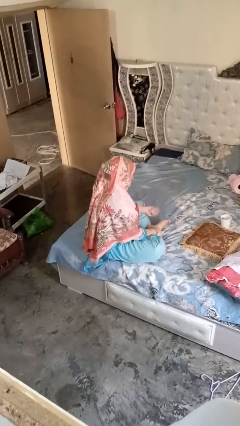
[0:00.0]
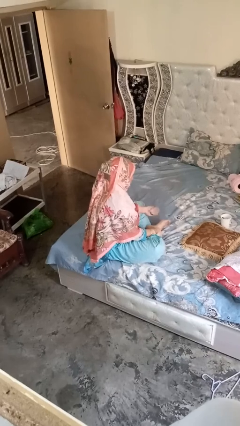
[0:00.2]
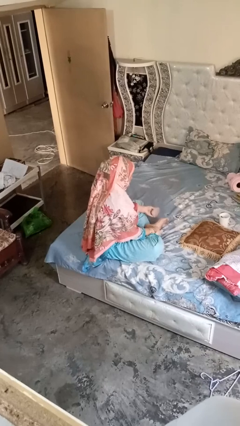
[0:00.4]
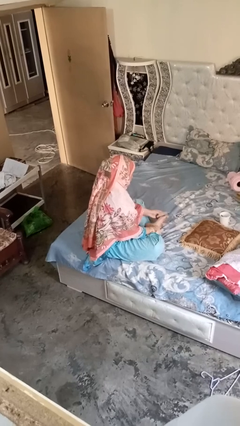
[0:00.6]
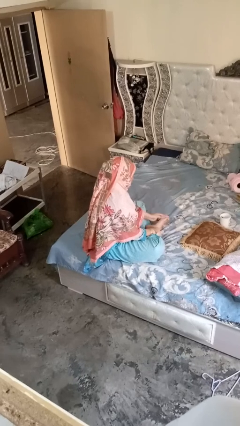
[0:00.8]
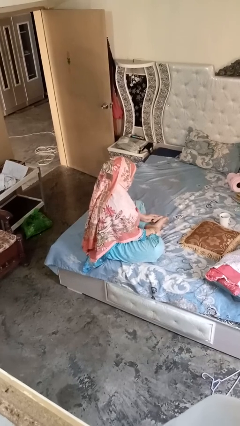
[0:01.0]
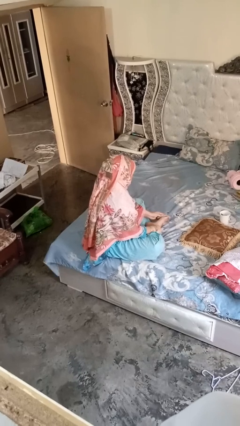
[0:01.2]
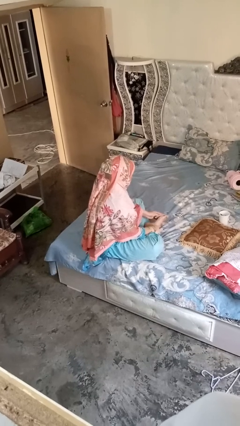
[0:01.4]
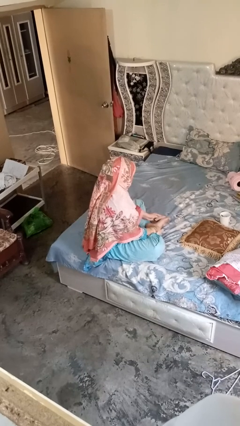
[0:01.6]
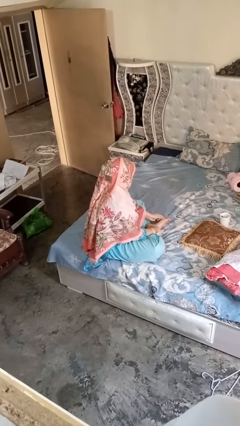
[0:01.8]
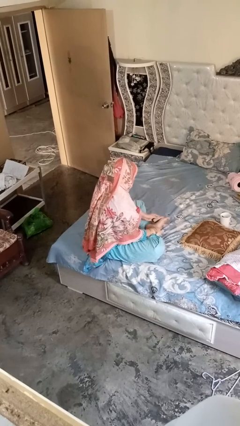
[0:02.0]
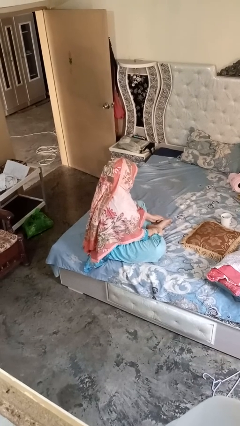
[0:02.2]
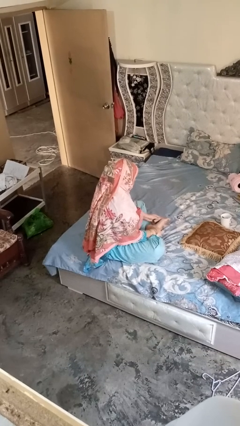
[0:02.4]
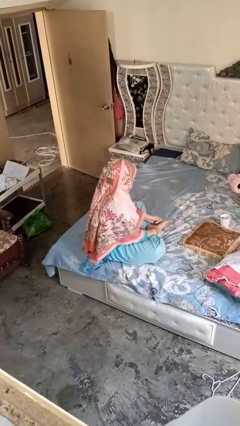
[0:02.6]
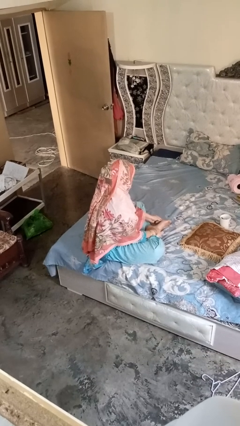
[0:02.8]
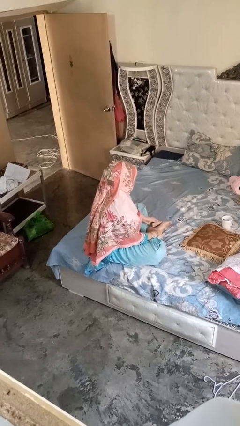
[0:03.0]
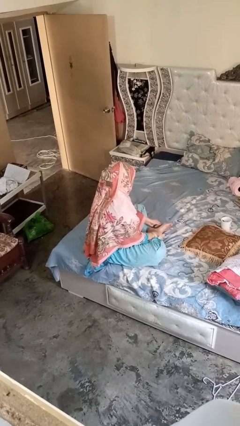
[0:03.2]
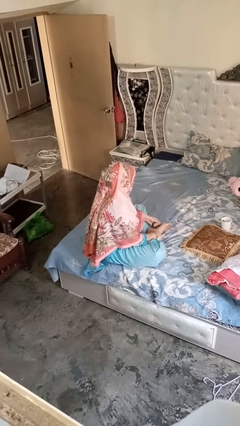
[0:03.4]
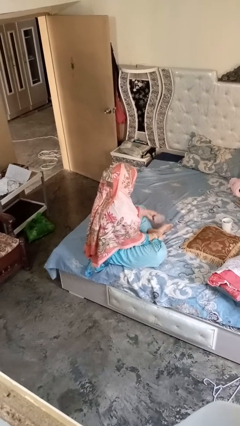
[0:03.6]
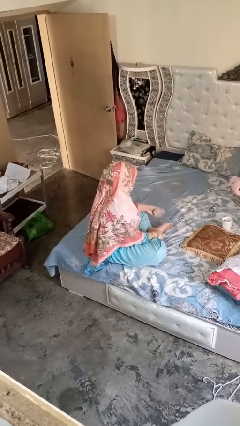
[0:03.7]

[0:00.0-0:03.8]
person rubs foot

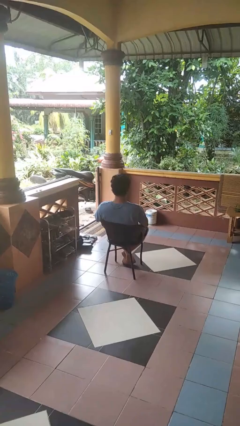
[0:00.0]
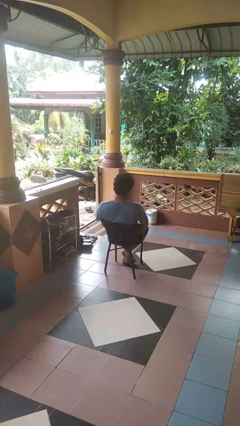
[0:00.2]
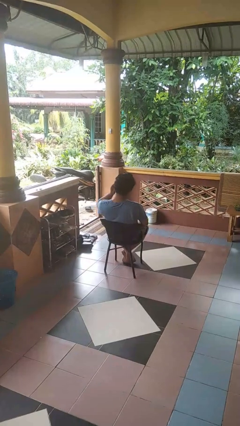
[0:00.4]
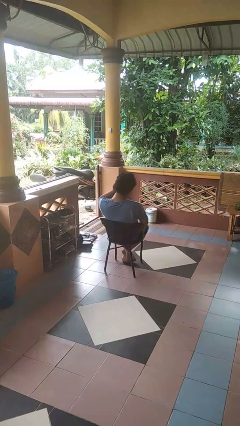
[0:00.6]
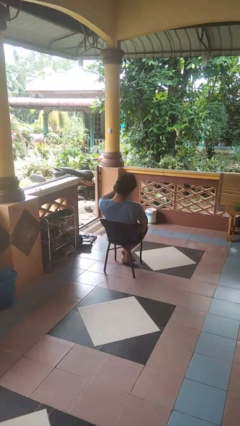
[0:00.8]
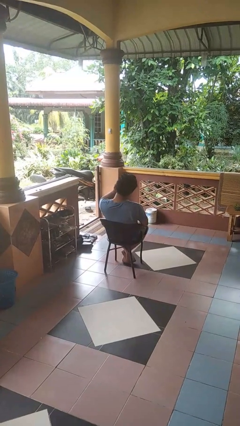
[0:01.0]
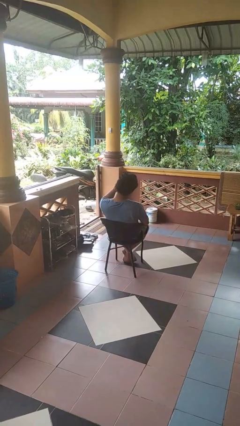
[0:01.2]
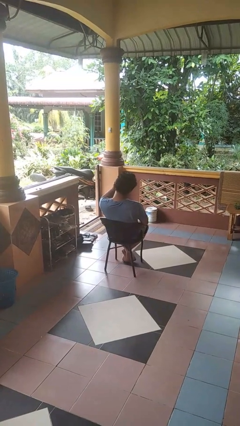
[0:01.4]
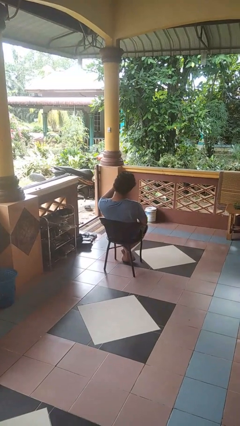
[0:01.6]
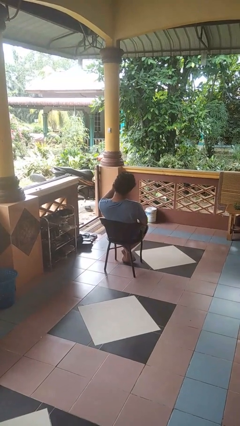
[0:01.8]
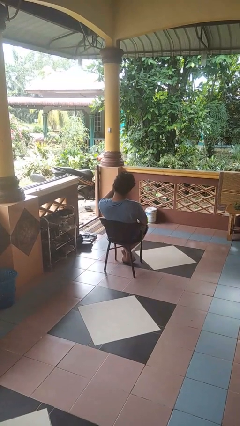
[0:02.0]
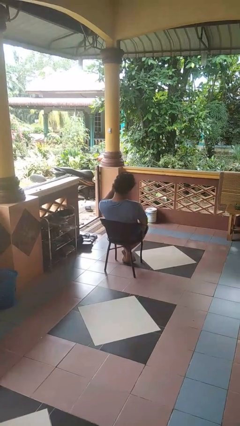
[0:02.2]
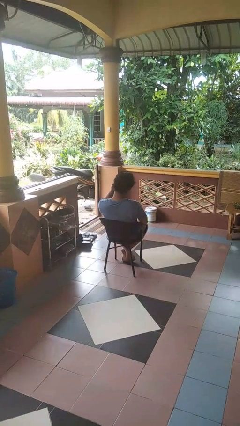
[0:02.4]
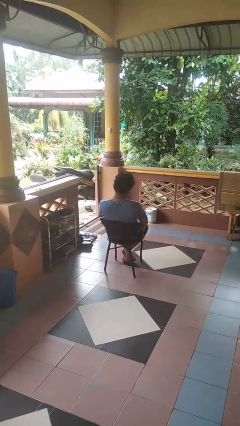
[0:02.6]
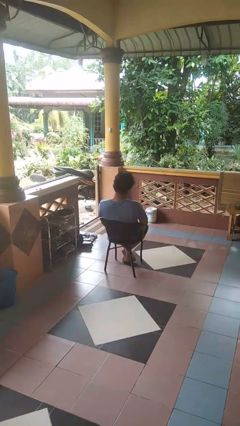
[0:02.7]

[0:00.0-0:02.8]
person touches earlobe

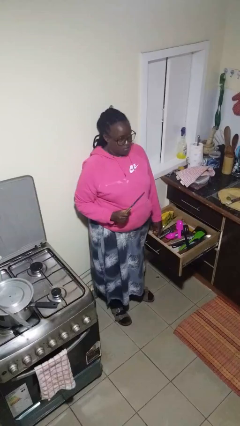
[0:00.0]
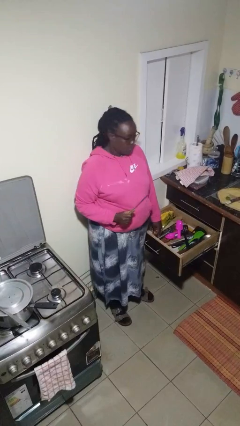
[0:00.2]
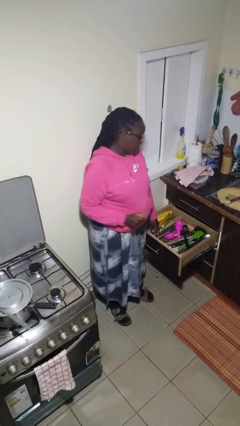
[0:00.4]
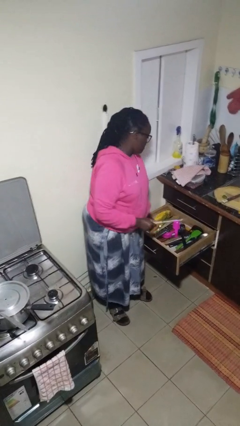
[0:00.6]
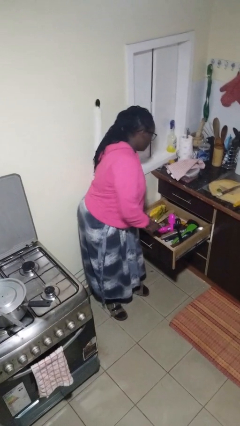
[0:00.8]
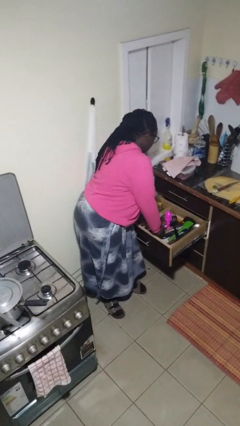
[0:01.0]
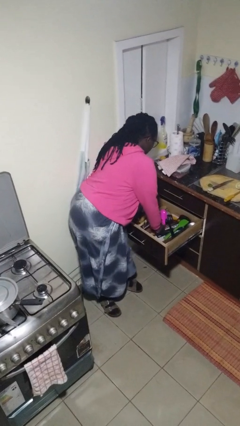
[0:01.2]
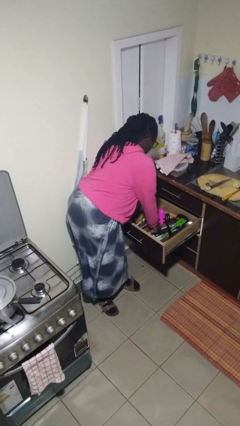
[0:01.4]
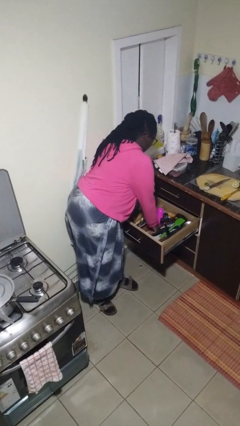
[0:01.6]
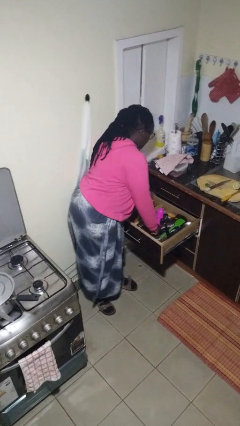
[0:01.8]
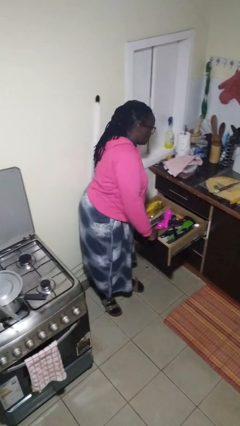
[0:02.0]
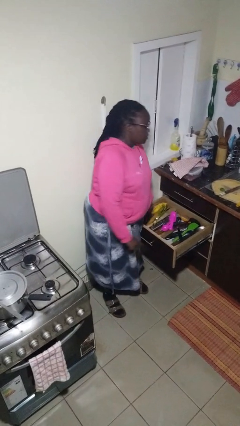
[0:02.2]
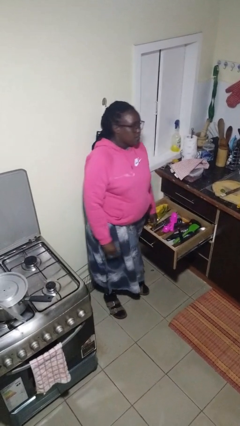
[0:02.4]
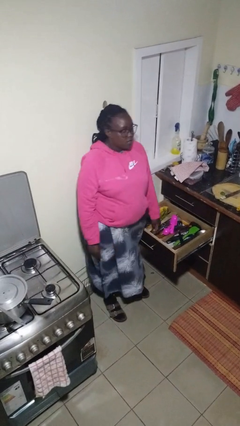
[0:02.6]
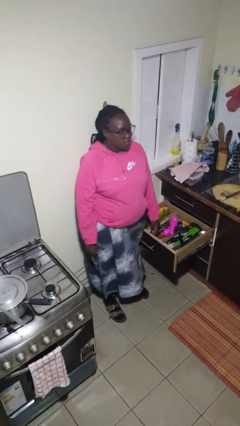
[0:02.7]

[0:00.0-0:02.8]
person puts object into kitchen drawer

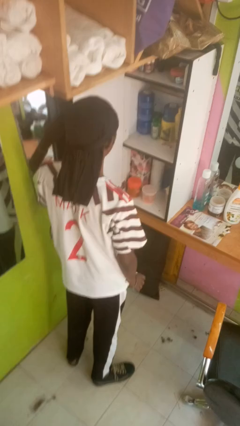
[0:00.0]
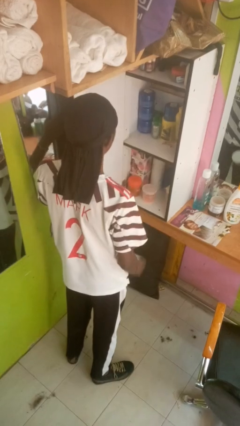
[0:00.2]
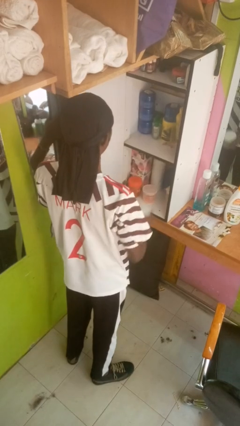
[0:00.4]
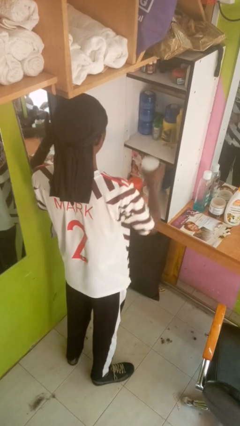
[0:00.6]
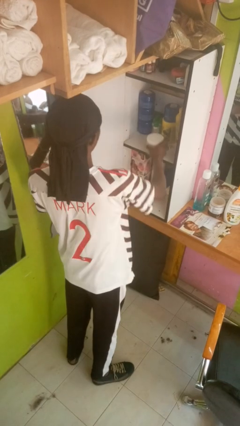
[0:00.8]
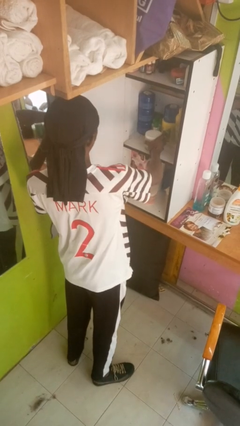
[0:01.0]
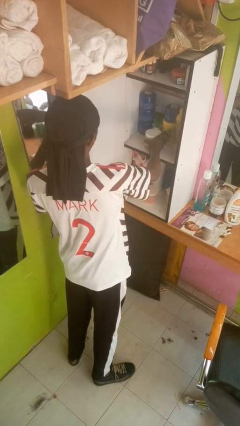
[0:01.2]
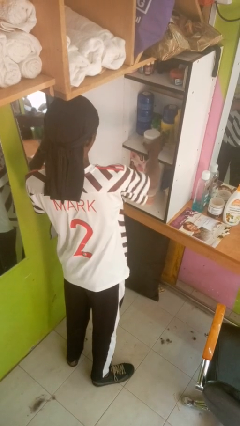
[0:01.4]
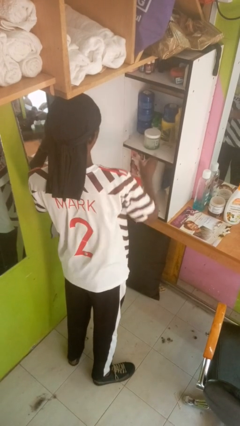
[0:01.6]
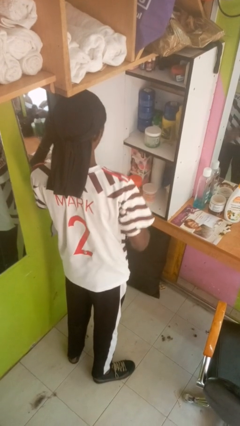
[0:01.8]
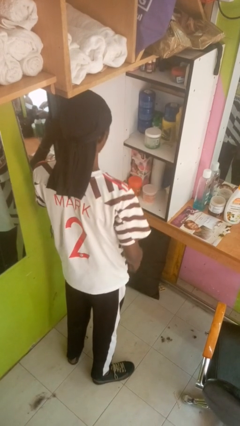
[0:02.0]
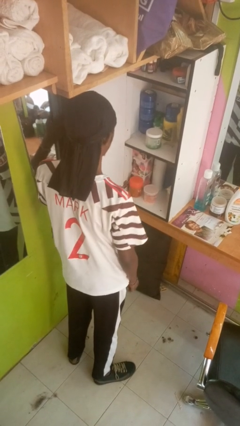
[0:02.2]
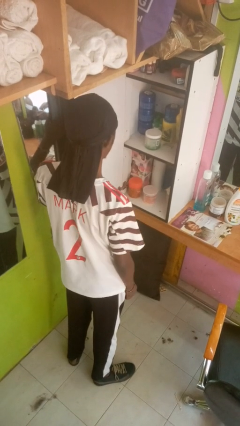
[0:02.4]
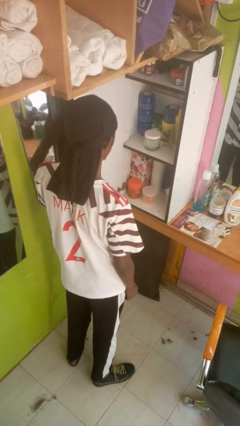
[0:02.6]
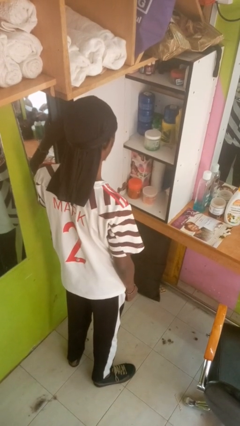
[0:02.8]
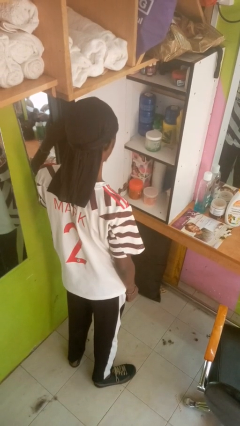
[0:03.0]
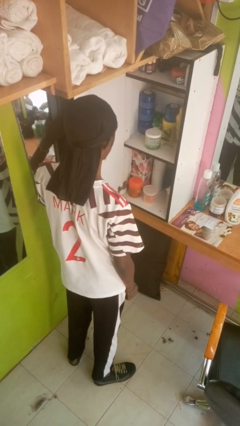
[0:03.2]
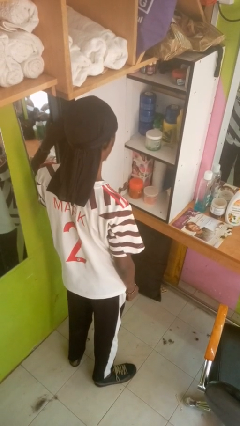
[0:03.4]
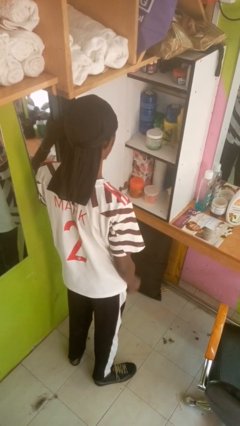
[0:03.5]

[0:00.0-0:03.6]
person puts down object into cabinet

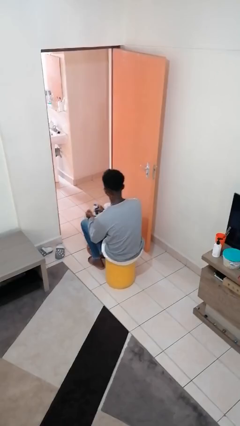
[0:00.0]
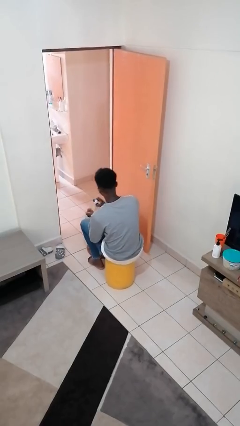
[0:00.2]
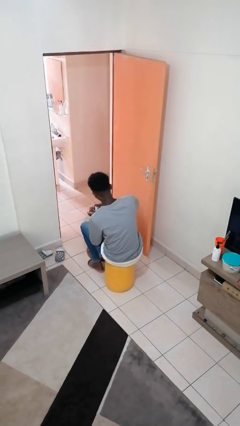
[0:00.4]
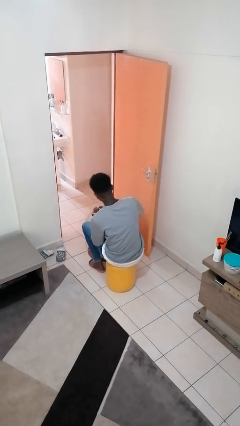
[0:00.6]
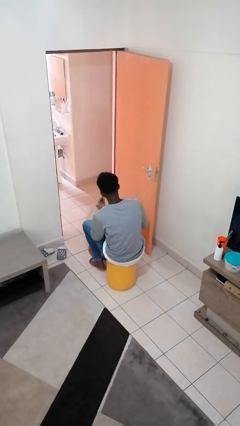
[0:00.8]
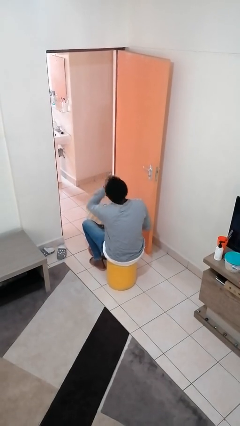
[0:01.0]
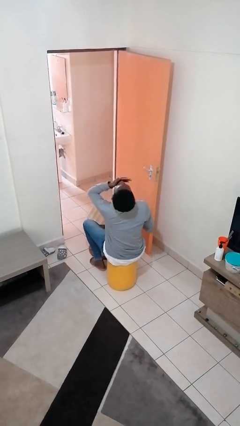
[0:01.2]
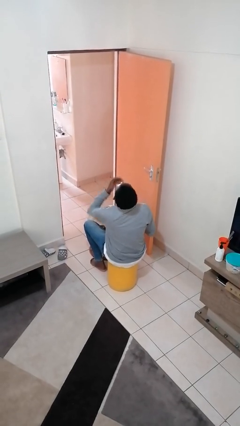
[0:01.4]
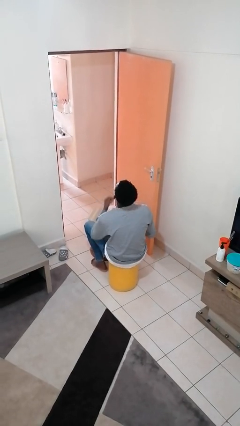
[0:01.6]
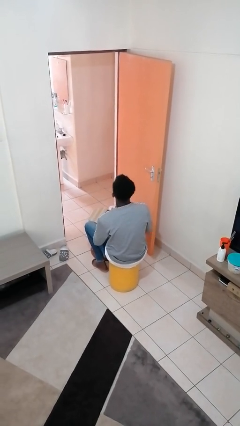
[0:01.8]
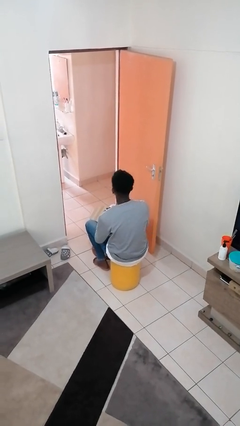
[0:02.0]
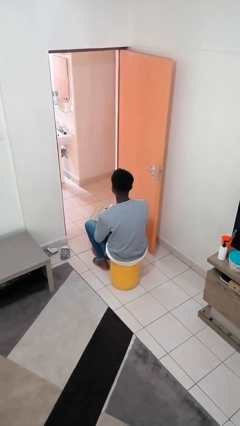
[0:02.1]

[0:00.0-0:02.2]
person takes medicine pills

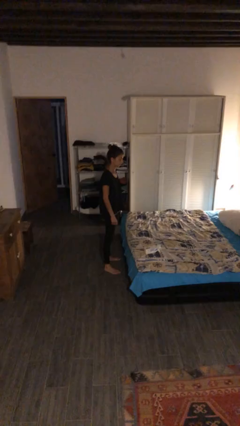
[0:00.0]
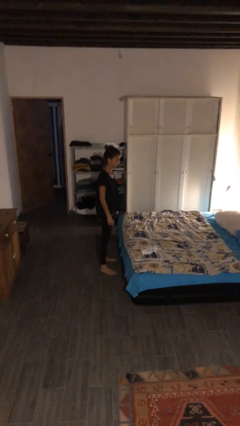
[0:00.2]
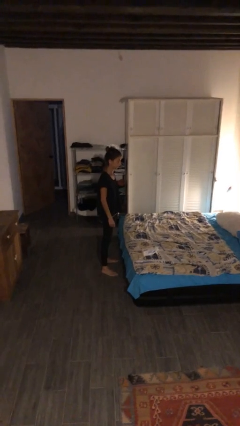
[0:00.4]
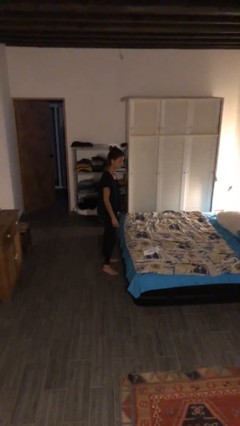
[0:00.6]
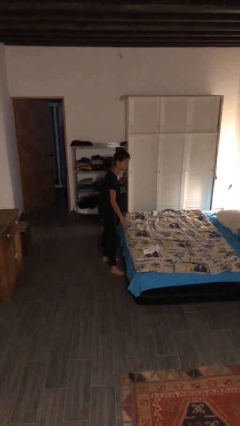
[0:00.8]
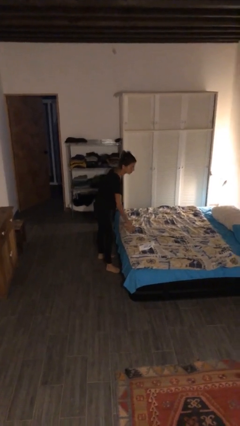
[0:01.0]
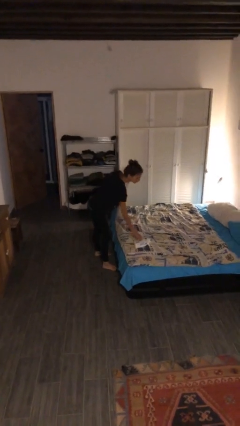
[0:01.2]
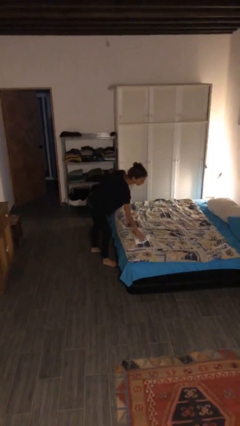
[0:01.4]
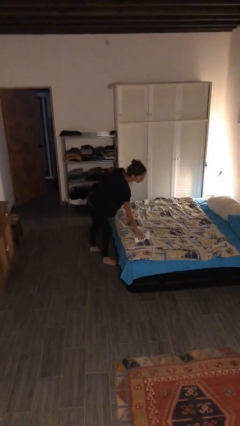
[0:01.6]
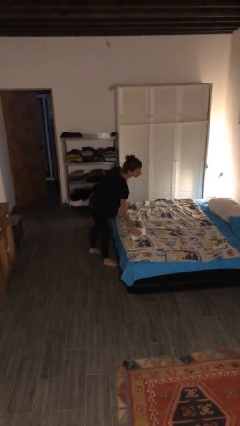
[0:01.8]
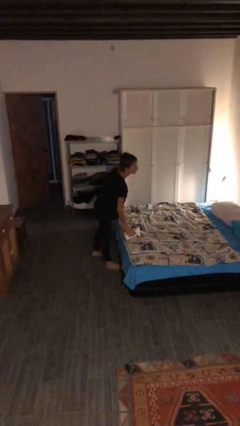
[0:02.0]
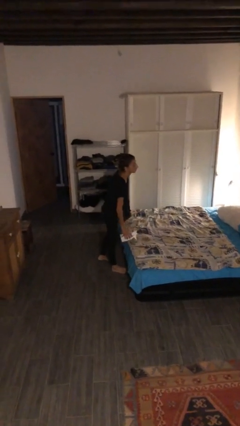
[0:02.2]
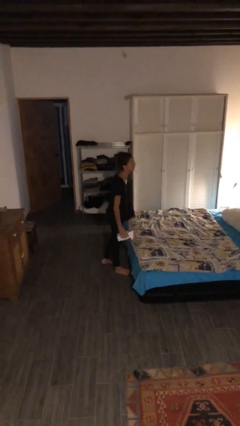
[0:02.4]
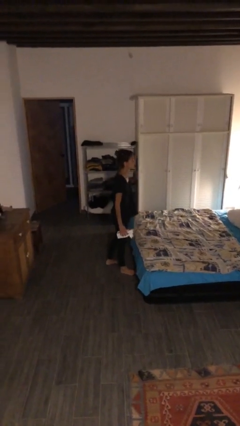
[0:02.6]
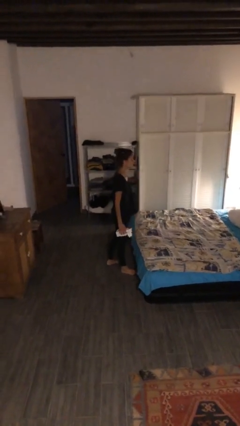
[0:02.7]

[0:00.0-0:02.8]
person picks up object from bed
